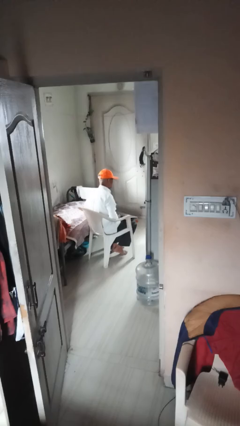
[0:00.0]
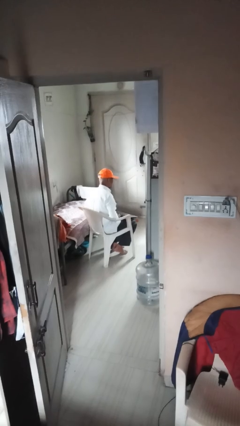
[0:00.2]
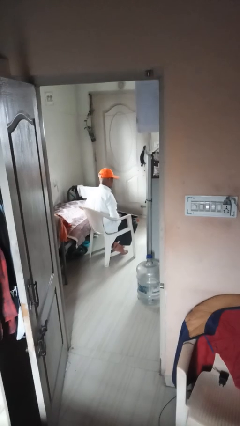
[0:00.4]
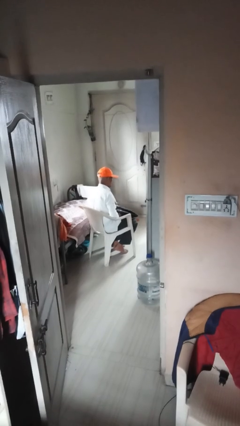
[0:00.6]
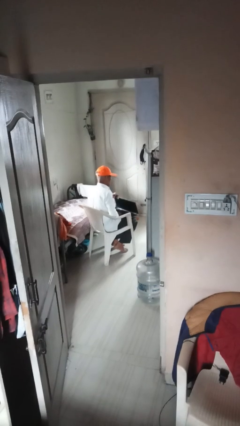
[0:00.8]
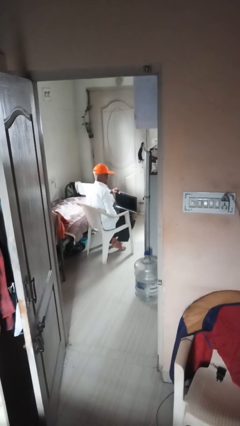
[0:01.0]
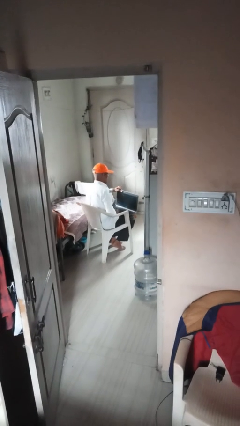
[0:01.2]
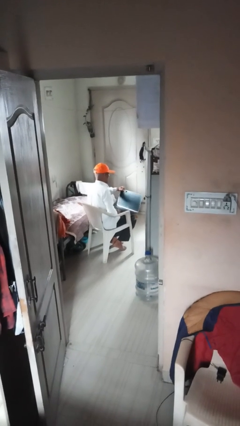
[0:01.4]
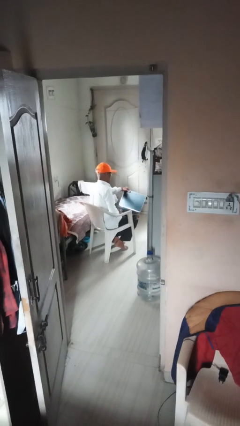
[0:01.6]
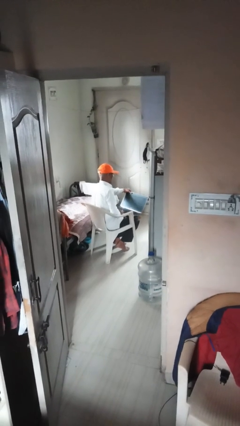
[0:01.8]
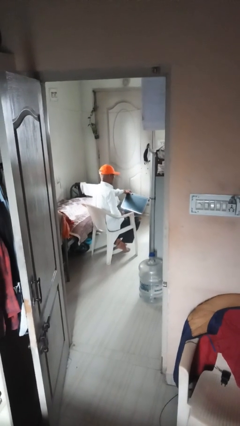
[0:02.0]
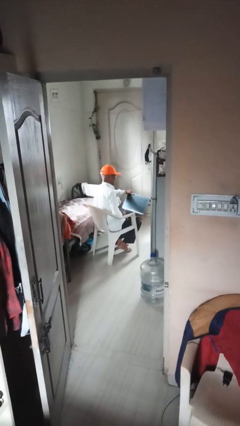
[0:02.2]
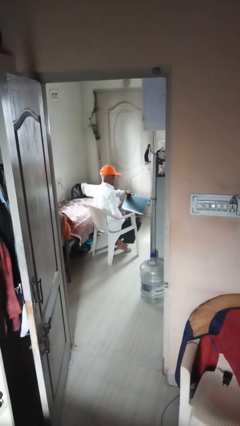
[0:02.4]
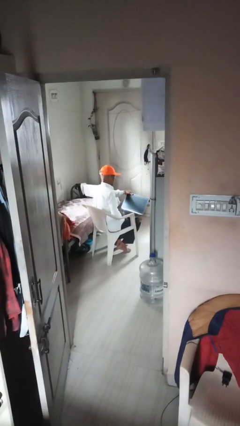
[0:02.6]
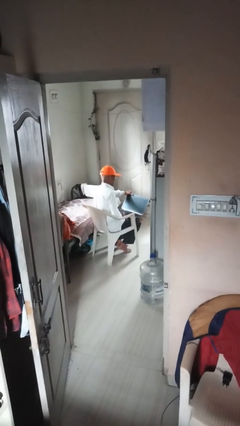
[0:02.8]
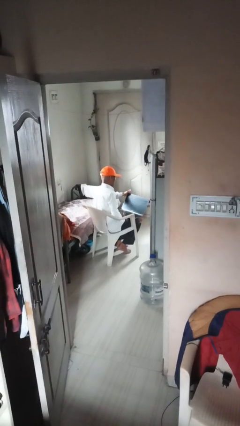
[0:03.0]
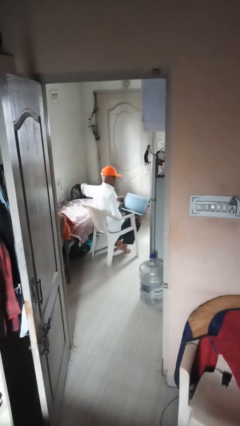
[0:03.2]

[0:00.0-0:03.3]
person opens laptop

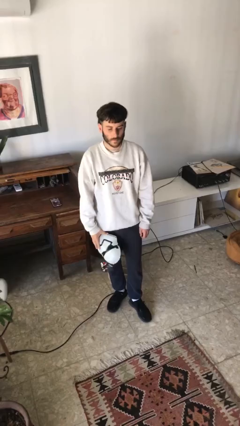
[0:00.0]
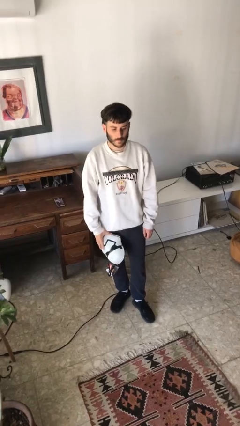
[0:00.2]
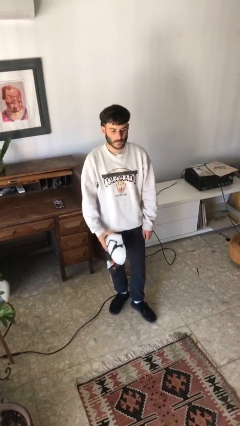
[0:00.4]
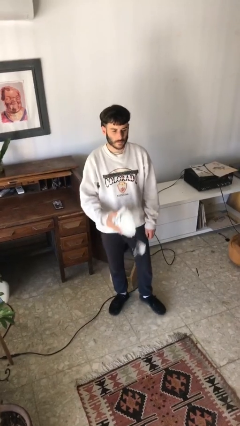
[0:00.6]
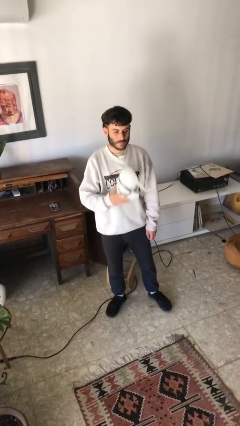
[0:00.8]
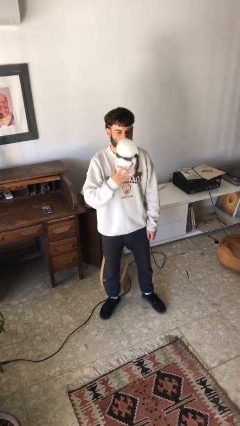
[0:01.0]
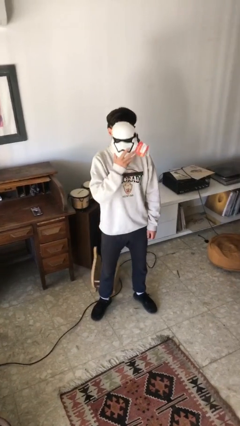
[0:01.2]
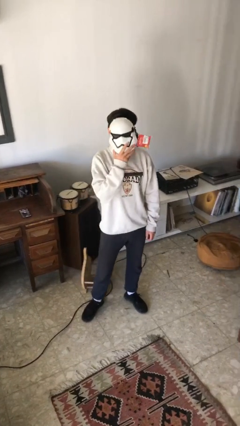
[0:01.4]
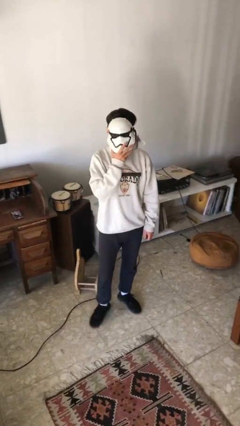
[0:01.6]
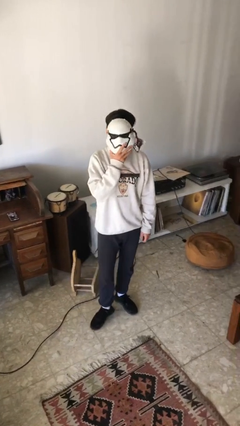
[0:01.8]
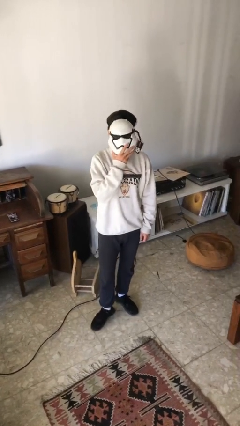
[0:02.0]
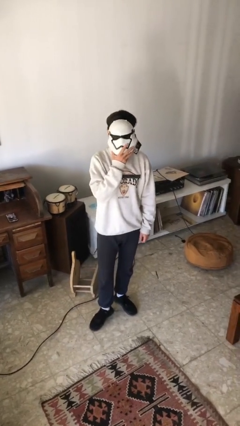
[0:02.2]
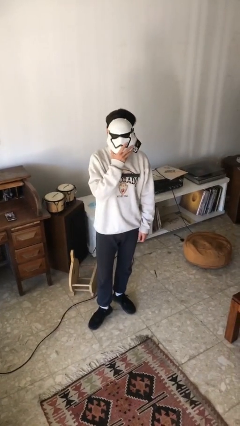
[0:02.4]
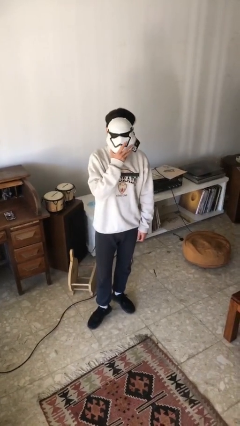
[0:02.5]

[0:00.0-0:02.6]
person puts on facemask

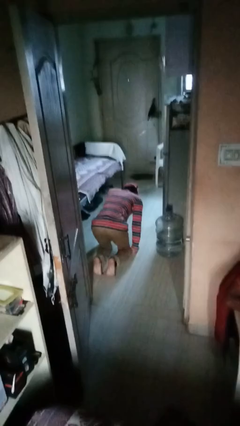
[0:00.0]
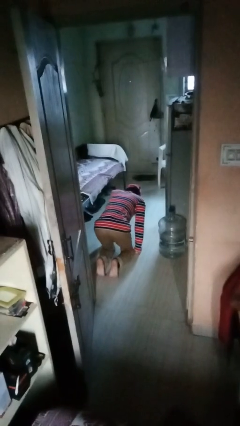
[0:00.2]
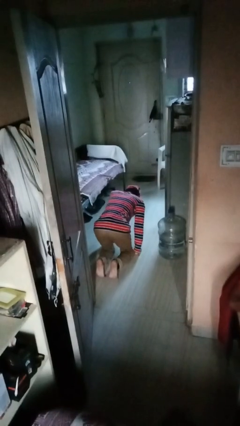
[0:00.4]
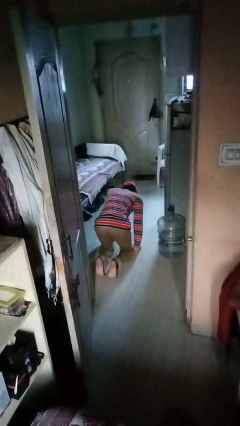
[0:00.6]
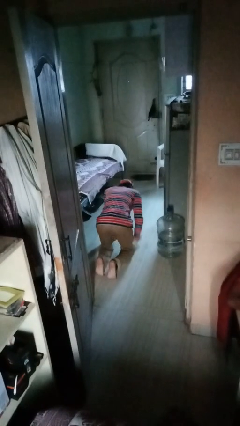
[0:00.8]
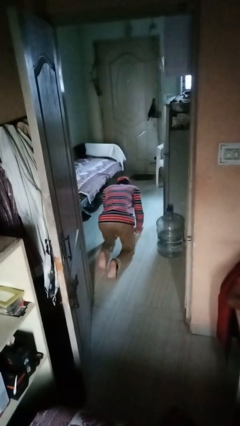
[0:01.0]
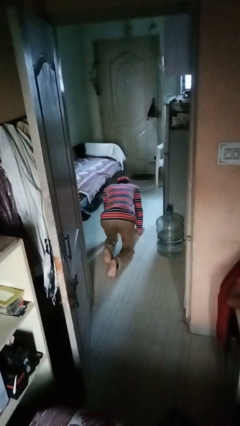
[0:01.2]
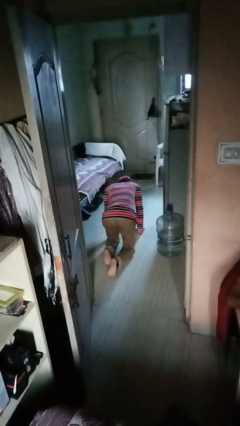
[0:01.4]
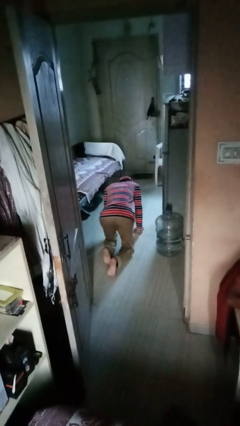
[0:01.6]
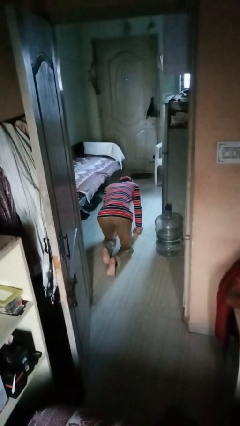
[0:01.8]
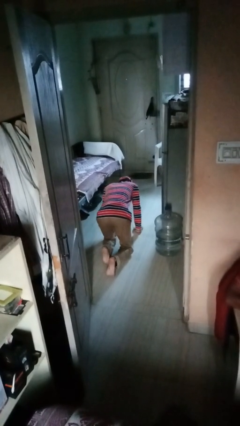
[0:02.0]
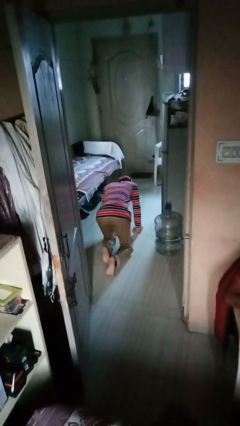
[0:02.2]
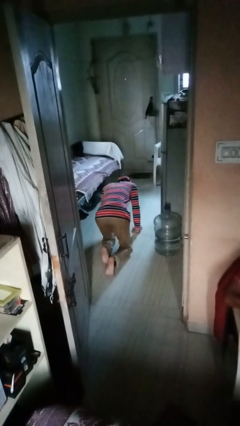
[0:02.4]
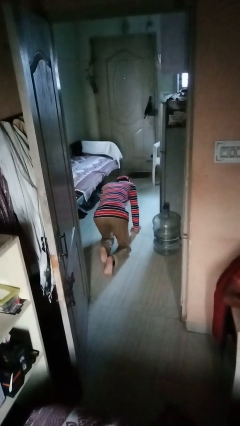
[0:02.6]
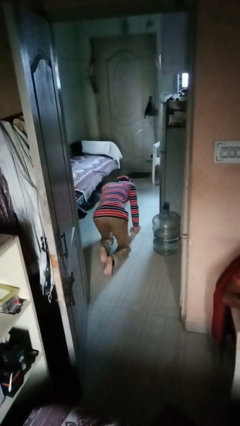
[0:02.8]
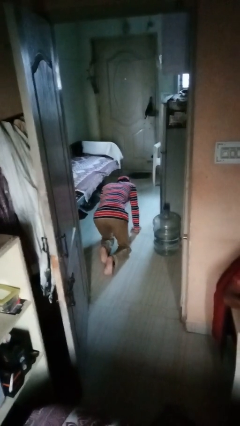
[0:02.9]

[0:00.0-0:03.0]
person crawls

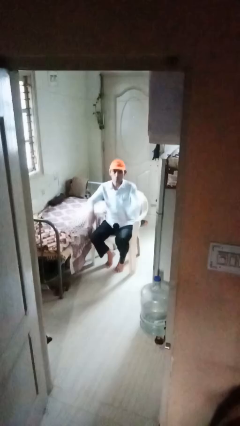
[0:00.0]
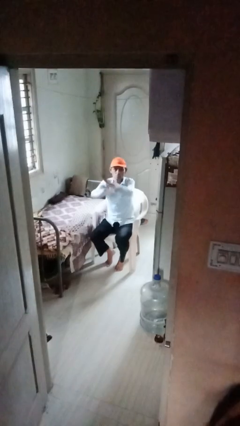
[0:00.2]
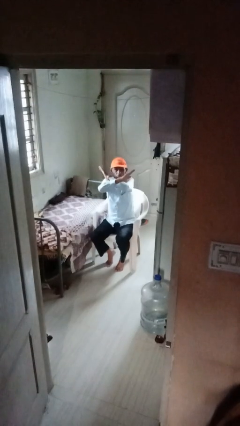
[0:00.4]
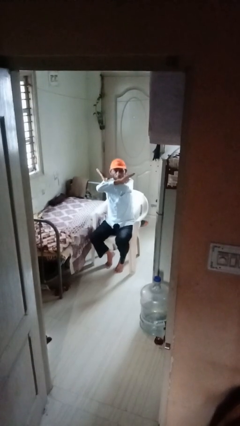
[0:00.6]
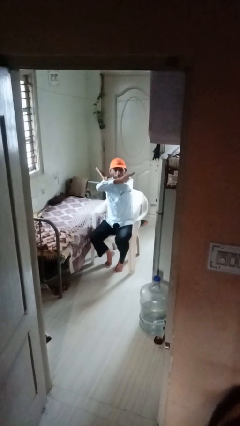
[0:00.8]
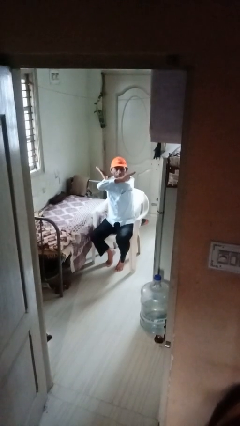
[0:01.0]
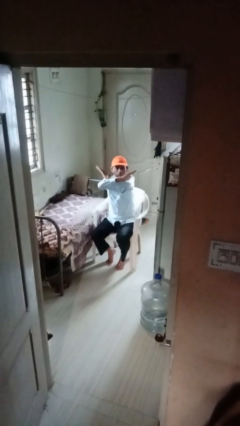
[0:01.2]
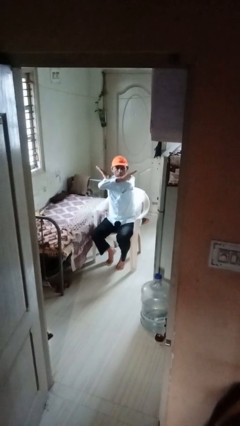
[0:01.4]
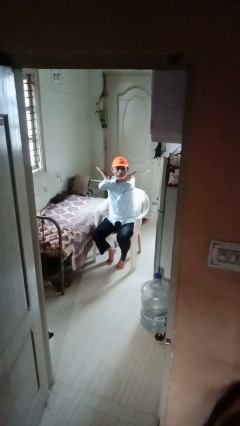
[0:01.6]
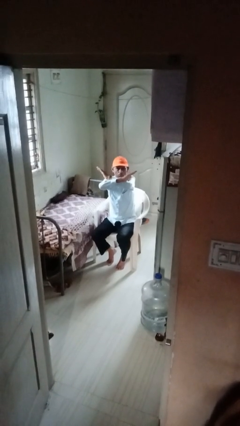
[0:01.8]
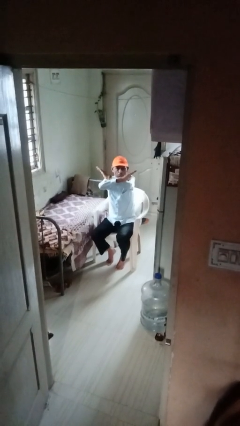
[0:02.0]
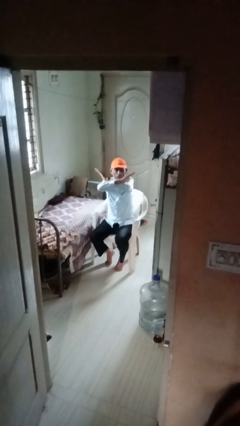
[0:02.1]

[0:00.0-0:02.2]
person gestures arms x

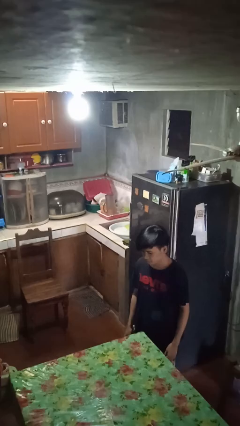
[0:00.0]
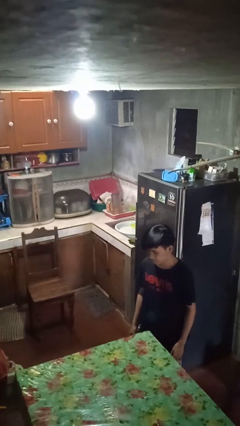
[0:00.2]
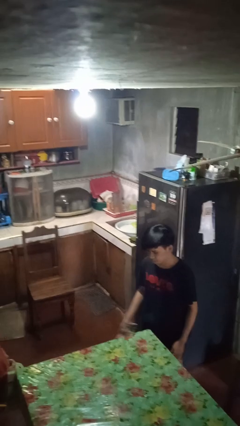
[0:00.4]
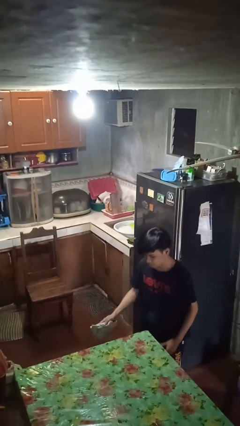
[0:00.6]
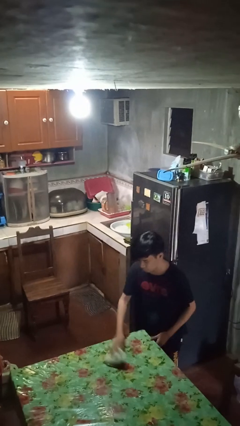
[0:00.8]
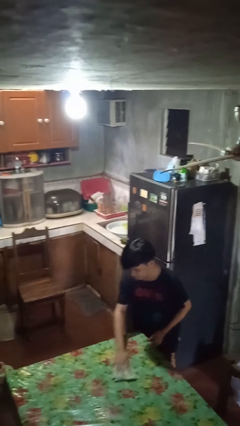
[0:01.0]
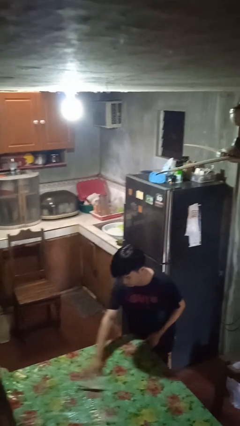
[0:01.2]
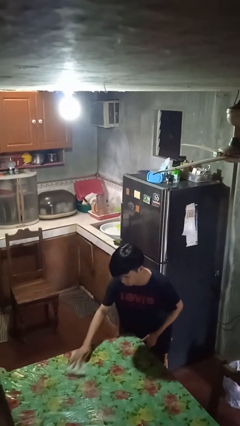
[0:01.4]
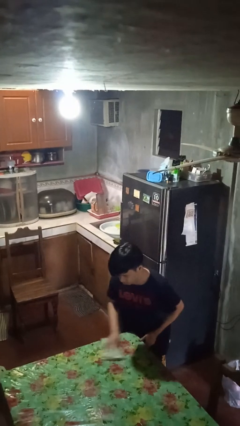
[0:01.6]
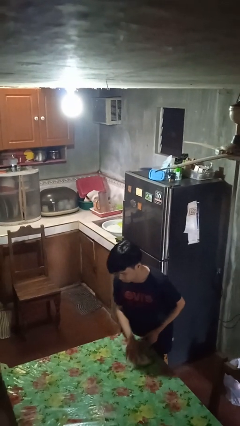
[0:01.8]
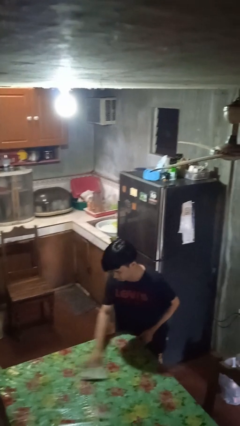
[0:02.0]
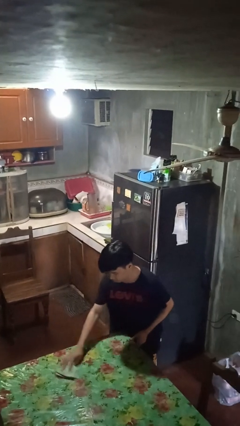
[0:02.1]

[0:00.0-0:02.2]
person cleans table with rag

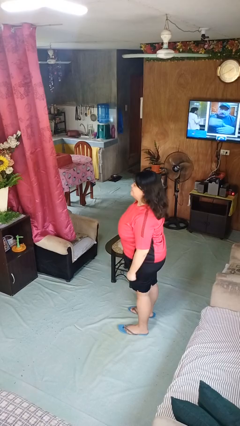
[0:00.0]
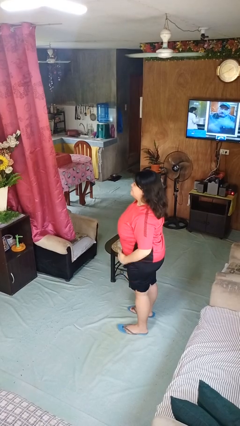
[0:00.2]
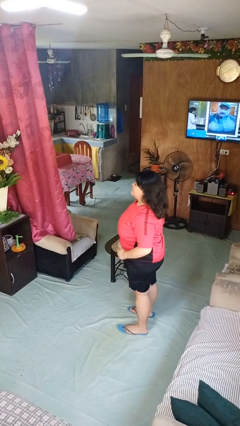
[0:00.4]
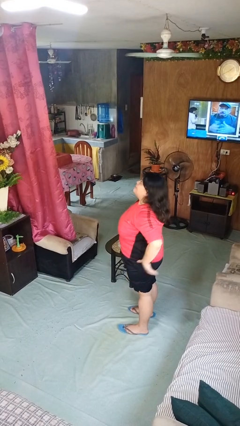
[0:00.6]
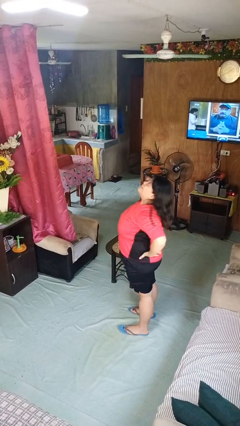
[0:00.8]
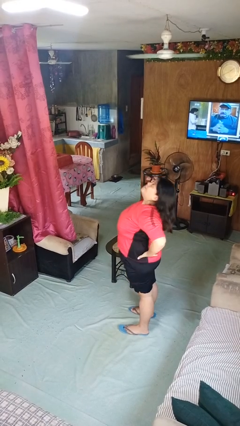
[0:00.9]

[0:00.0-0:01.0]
person stretches back

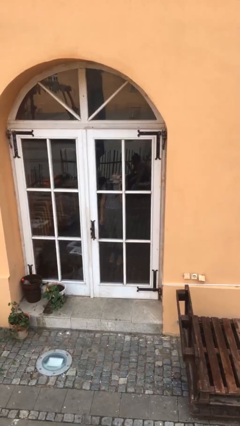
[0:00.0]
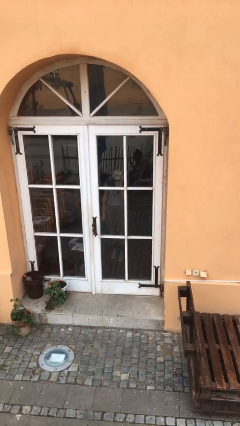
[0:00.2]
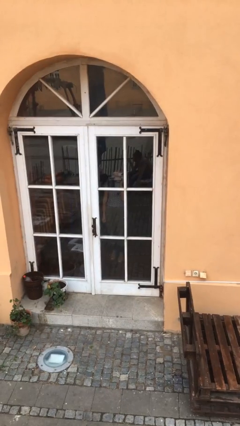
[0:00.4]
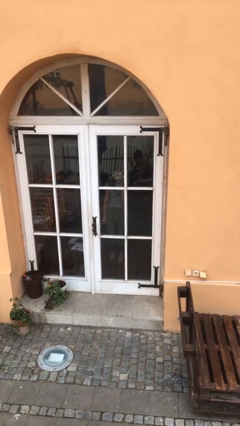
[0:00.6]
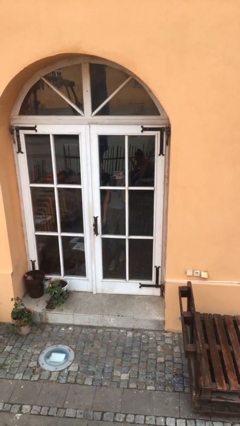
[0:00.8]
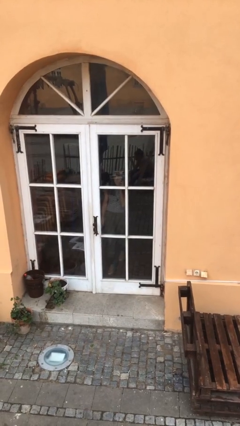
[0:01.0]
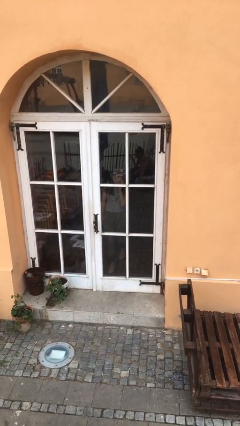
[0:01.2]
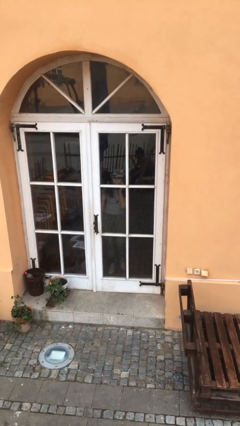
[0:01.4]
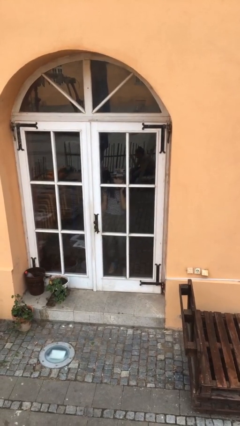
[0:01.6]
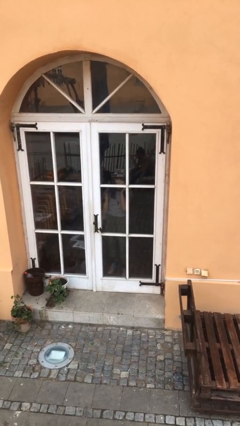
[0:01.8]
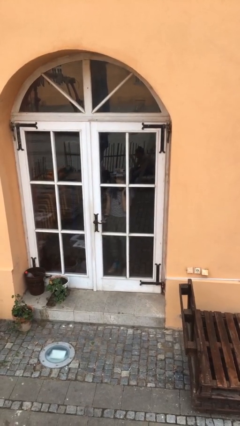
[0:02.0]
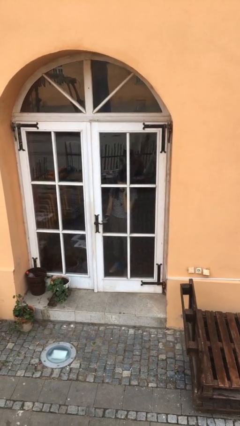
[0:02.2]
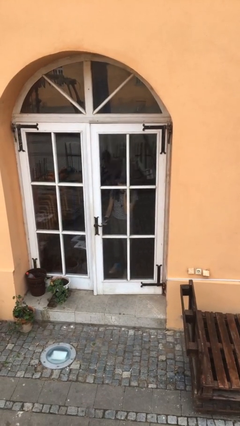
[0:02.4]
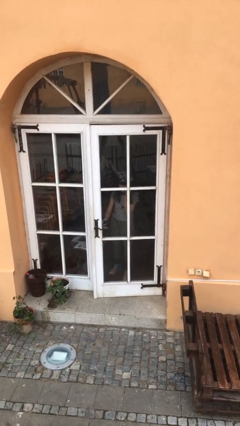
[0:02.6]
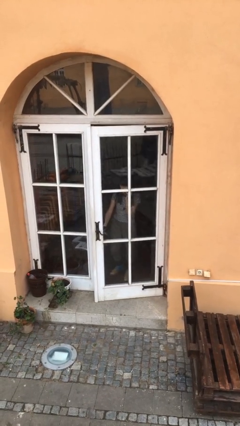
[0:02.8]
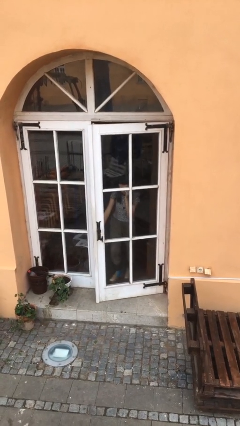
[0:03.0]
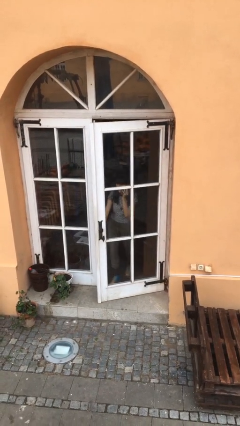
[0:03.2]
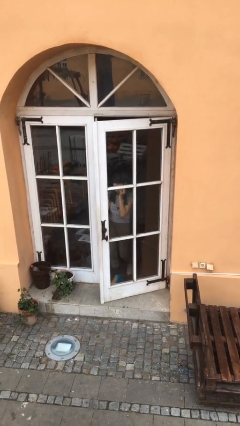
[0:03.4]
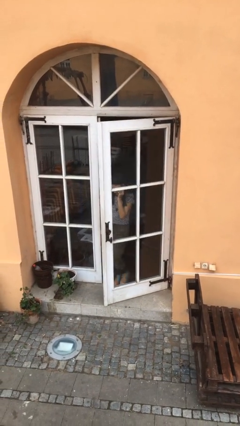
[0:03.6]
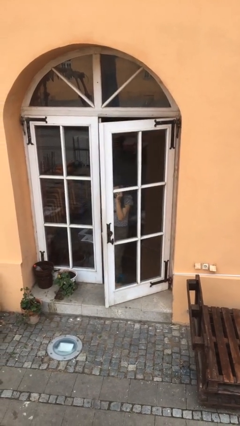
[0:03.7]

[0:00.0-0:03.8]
person opens facility door
